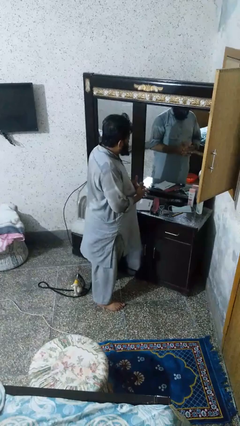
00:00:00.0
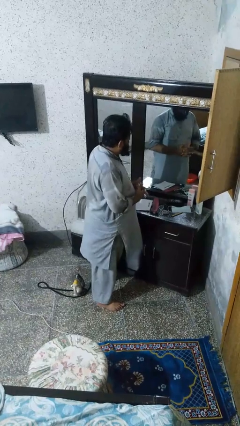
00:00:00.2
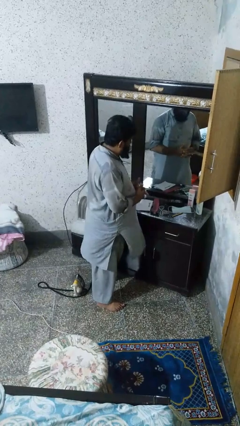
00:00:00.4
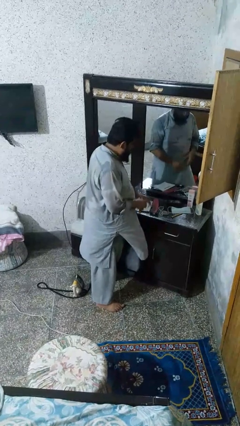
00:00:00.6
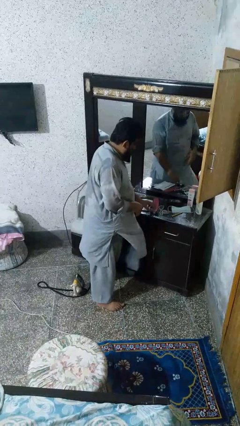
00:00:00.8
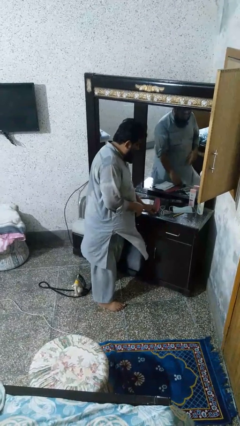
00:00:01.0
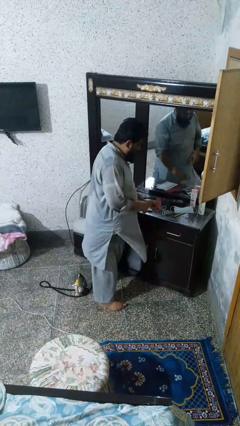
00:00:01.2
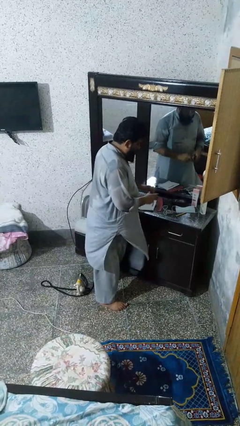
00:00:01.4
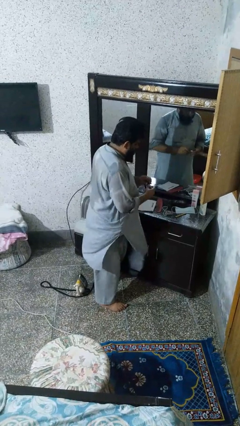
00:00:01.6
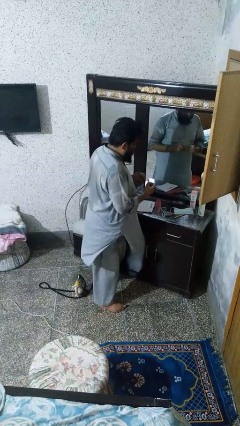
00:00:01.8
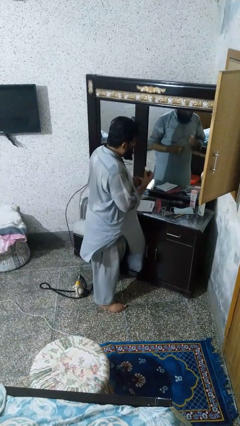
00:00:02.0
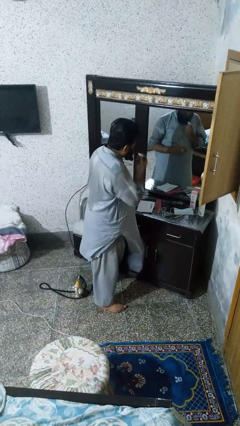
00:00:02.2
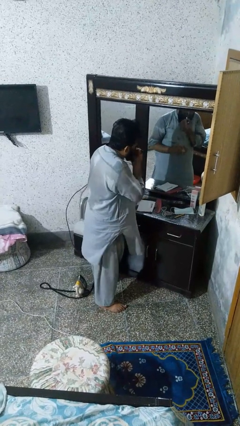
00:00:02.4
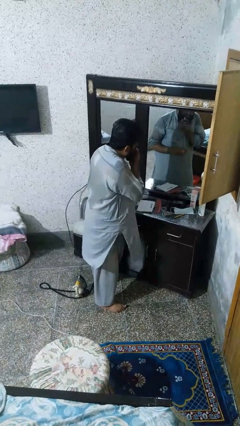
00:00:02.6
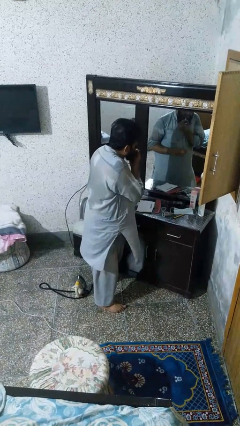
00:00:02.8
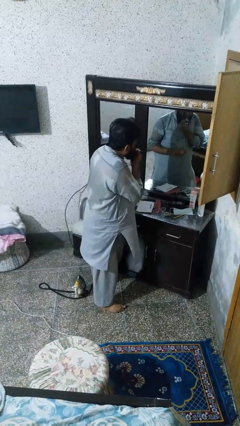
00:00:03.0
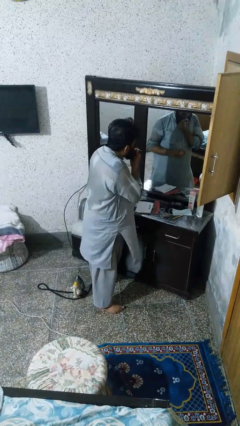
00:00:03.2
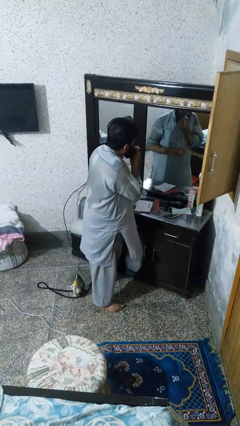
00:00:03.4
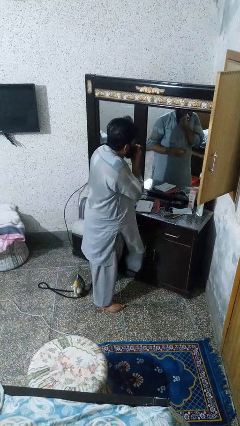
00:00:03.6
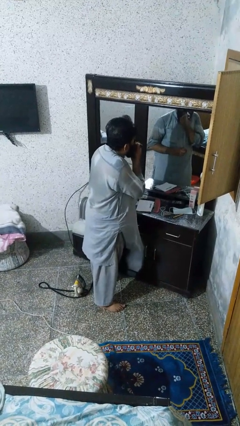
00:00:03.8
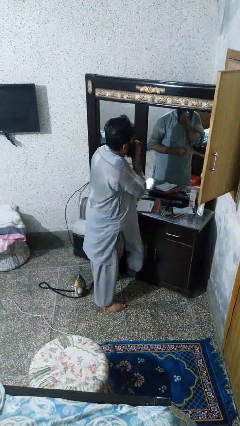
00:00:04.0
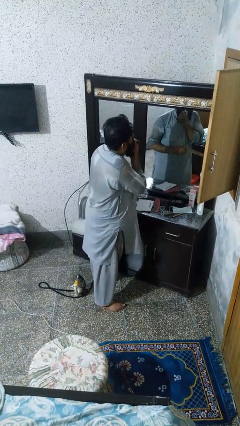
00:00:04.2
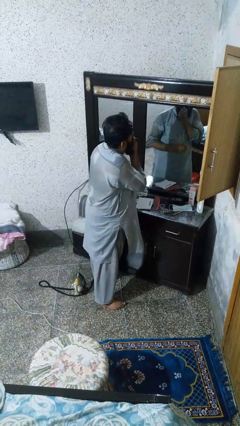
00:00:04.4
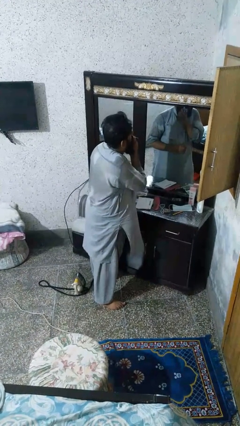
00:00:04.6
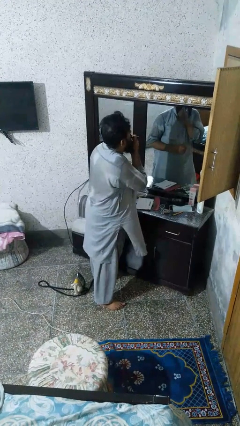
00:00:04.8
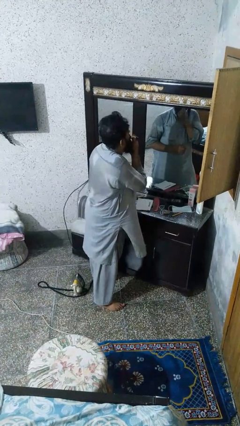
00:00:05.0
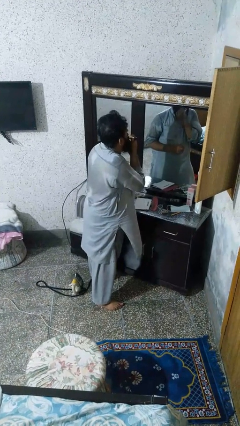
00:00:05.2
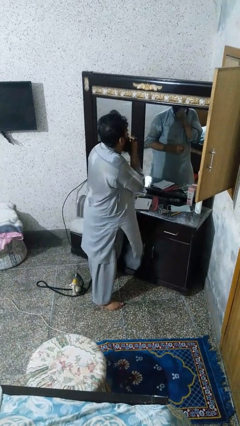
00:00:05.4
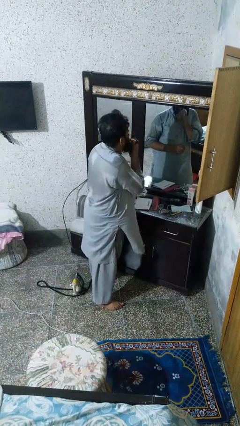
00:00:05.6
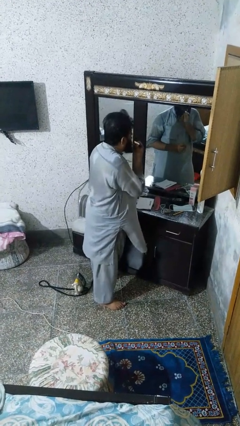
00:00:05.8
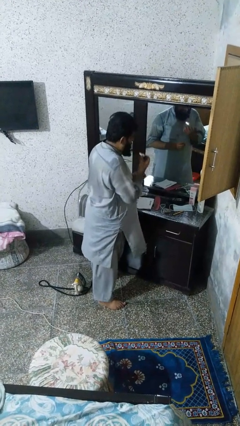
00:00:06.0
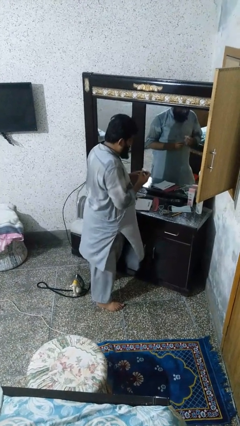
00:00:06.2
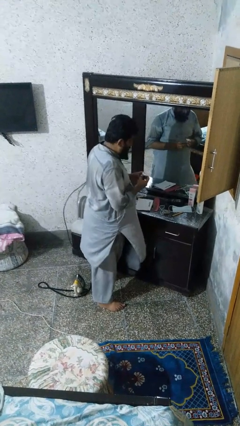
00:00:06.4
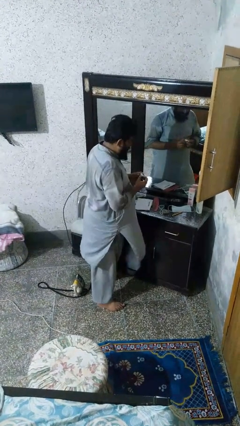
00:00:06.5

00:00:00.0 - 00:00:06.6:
person applies lip makeup

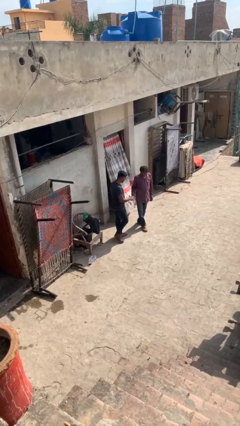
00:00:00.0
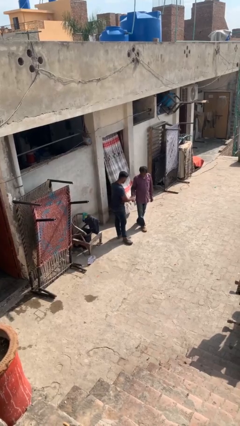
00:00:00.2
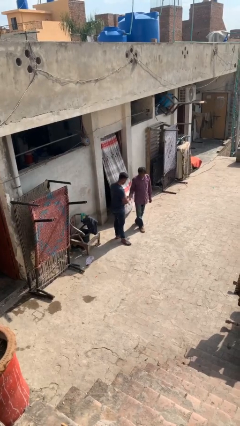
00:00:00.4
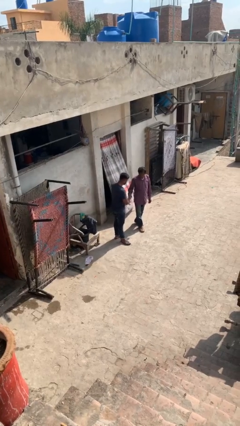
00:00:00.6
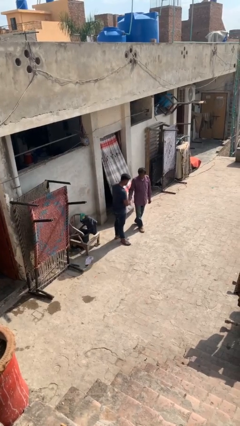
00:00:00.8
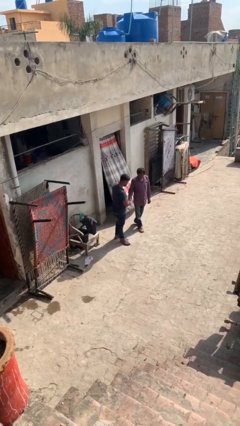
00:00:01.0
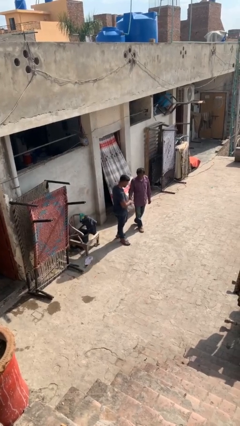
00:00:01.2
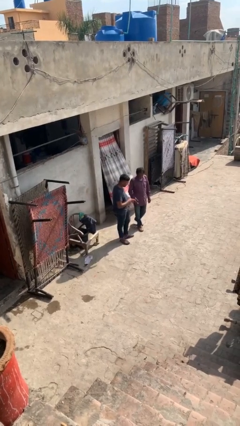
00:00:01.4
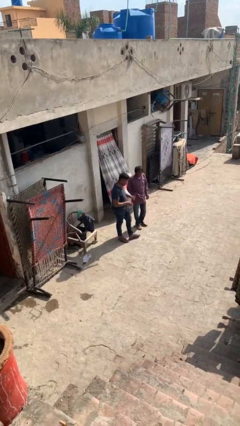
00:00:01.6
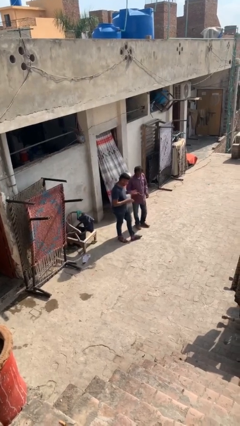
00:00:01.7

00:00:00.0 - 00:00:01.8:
person shakes hand

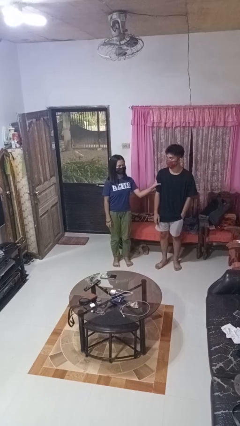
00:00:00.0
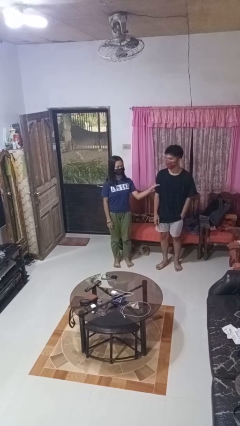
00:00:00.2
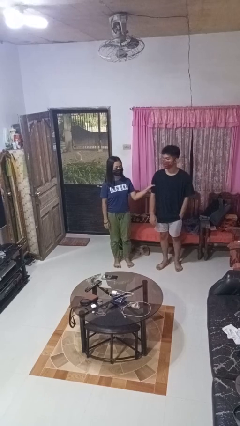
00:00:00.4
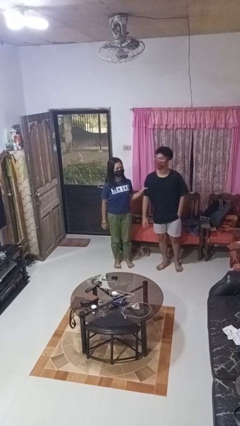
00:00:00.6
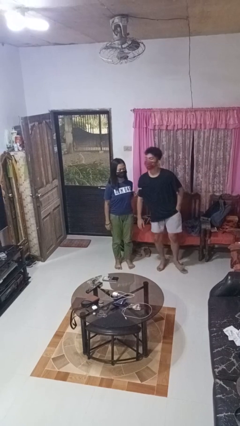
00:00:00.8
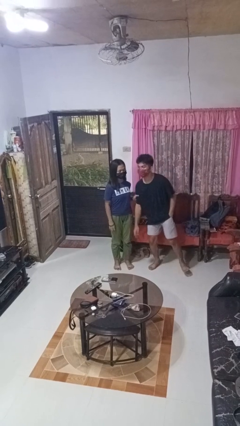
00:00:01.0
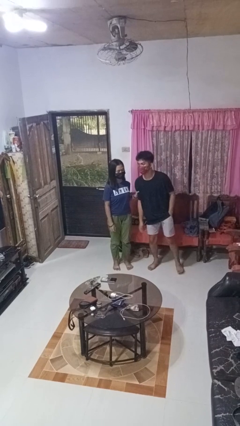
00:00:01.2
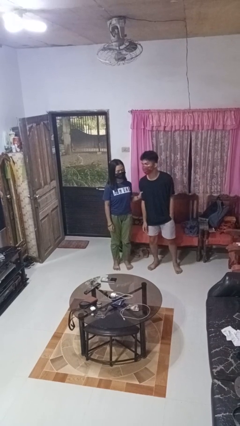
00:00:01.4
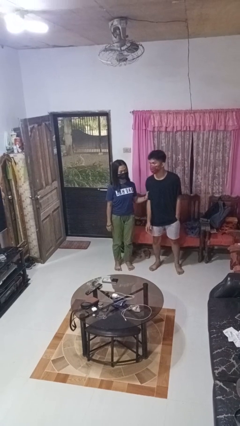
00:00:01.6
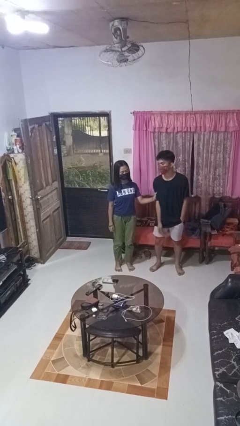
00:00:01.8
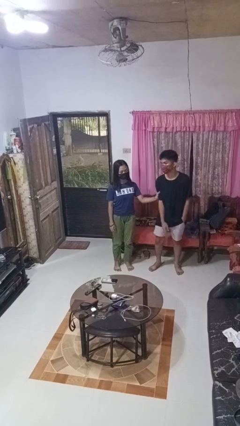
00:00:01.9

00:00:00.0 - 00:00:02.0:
person grabs person by bicep

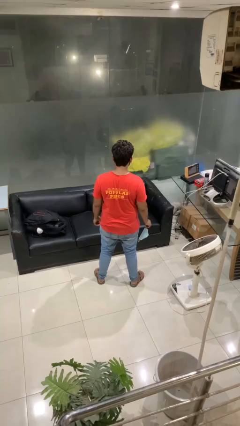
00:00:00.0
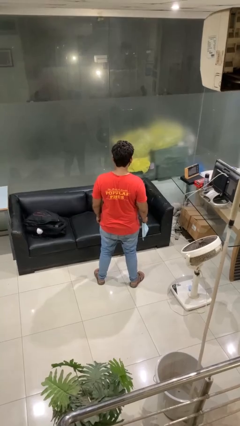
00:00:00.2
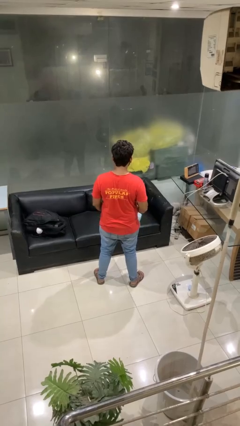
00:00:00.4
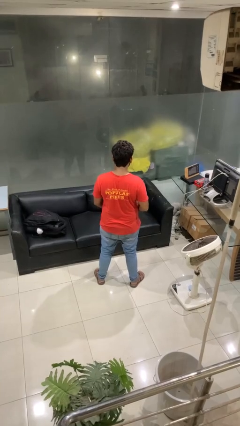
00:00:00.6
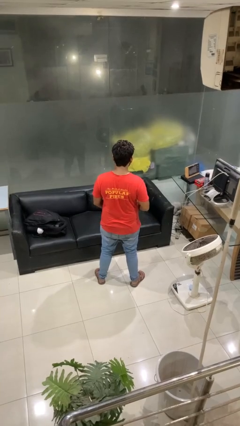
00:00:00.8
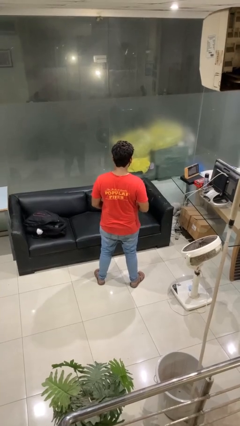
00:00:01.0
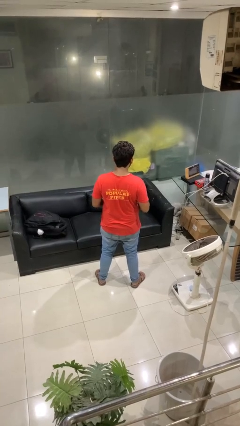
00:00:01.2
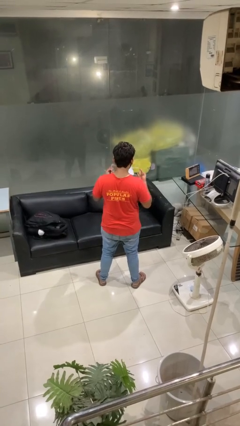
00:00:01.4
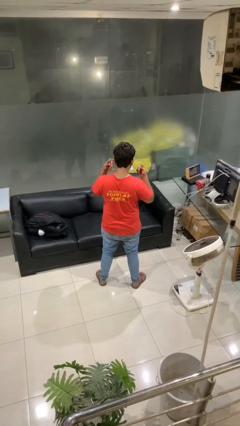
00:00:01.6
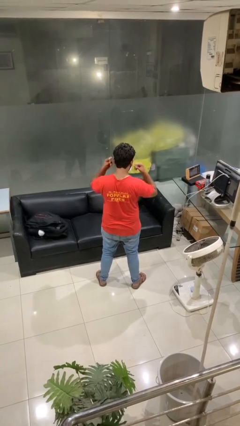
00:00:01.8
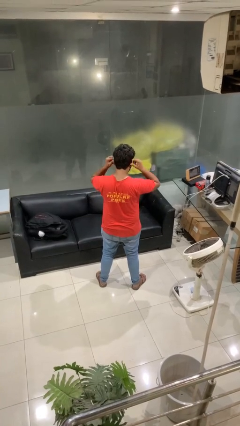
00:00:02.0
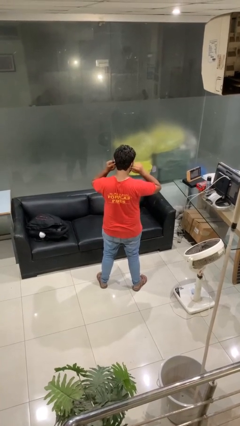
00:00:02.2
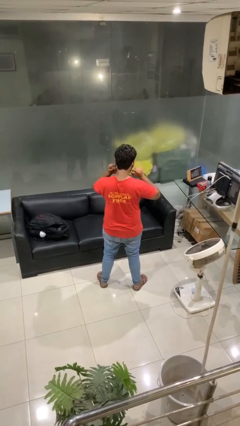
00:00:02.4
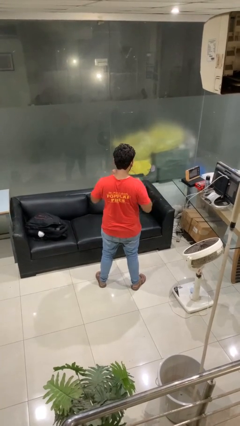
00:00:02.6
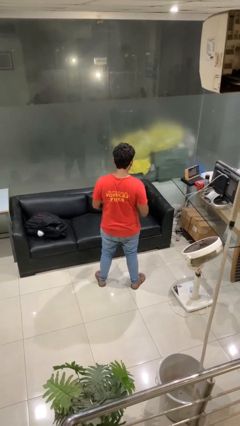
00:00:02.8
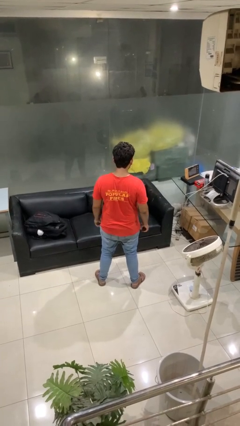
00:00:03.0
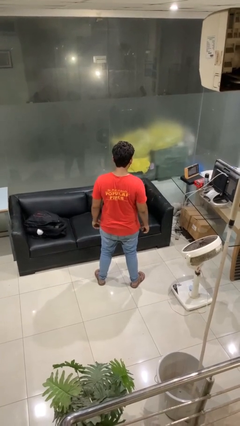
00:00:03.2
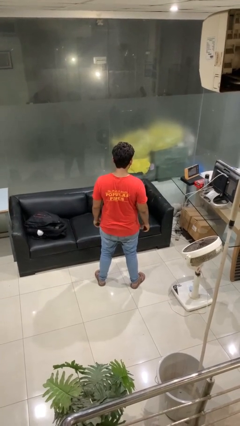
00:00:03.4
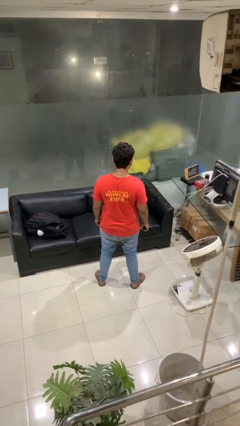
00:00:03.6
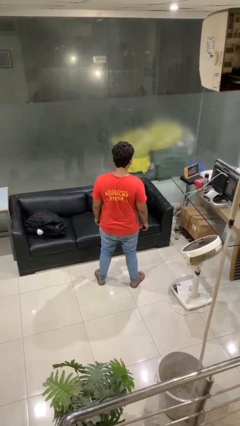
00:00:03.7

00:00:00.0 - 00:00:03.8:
person puts on facemask

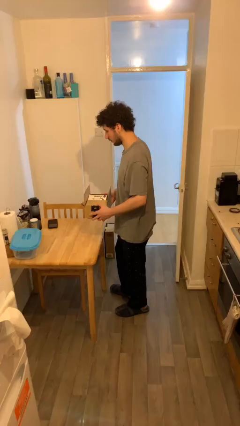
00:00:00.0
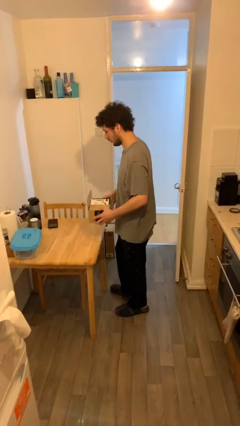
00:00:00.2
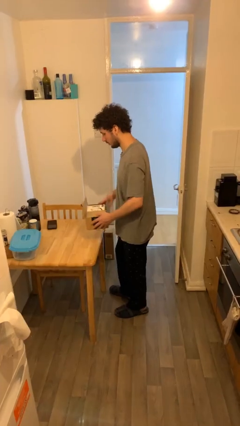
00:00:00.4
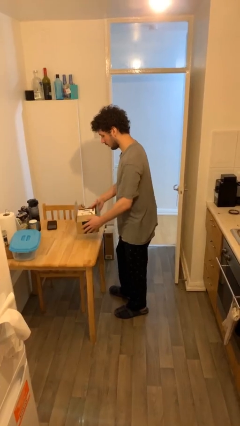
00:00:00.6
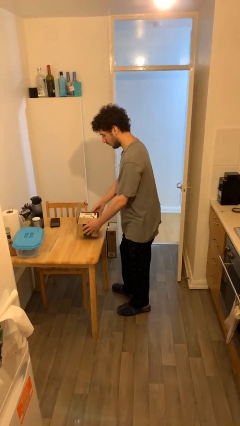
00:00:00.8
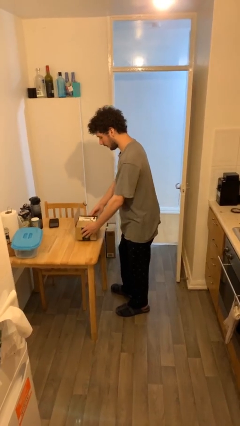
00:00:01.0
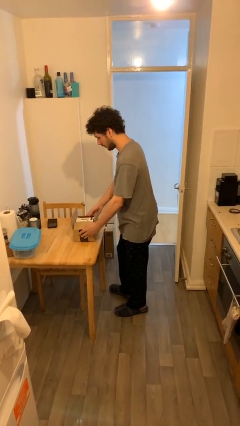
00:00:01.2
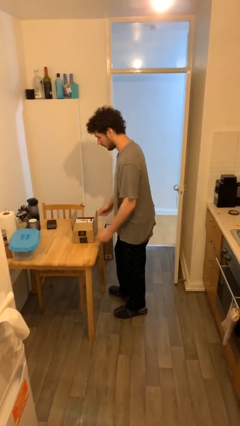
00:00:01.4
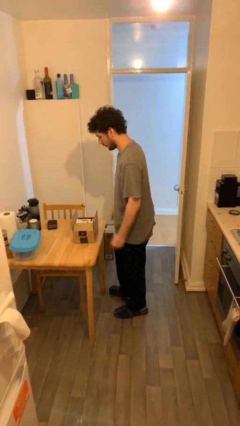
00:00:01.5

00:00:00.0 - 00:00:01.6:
person puts down object on table

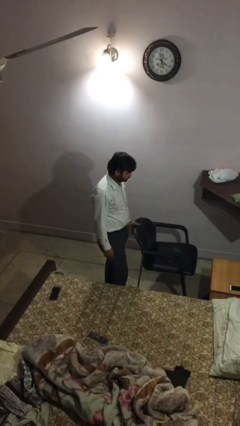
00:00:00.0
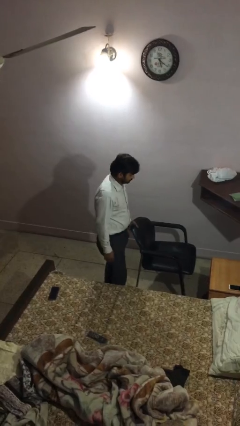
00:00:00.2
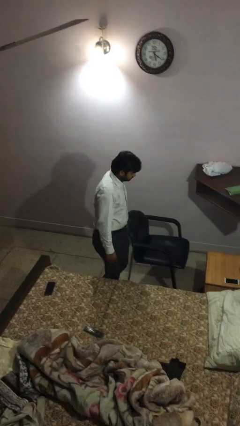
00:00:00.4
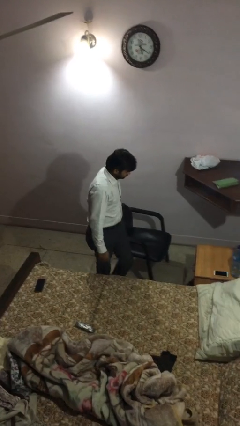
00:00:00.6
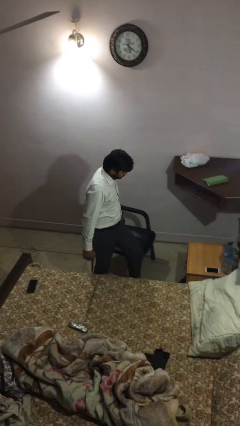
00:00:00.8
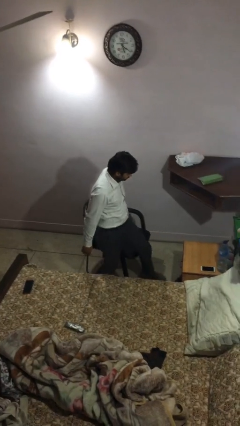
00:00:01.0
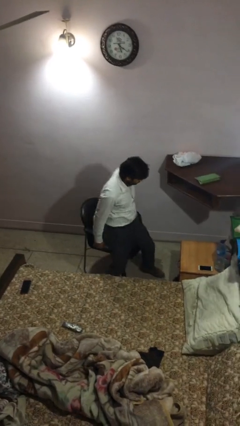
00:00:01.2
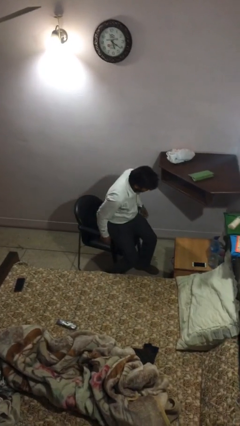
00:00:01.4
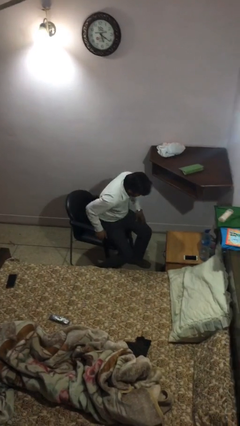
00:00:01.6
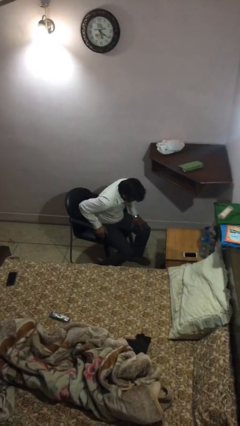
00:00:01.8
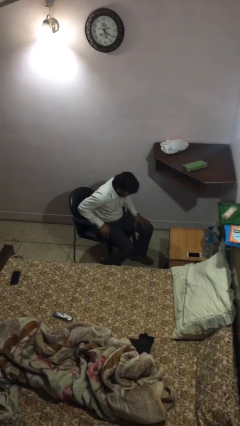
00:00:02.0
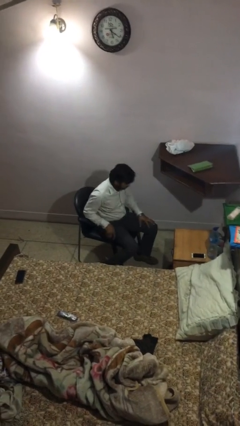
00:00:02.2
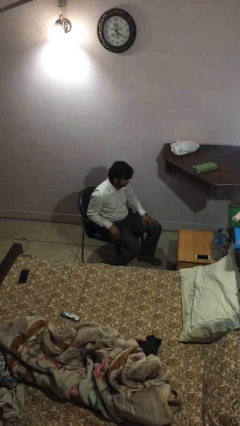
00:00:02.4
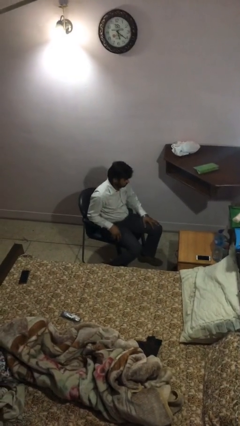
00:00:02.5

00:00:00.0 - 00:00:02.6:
person sits down
